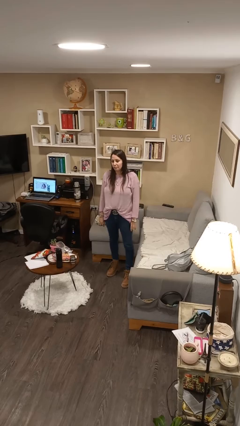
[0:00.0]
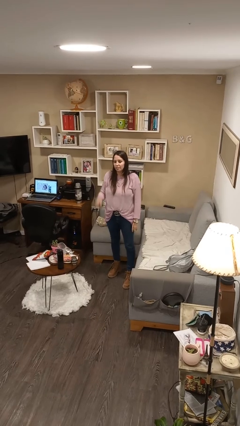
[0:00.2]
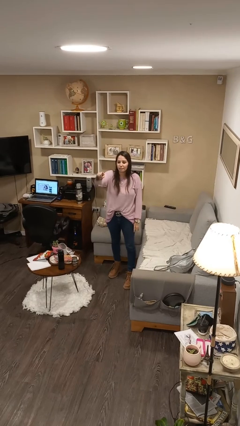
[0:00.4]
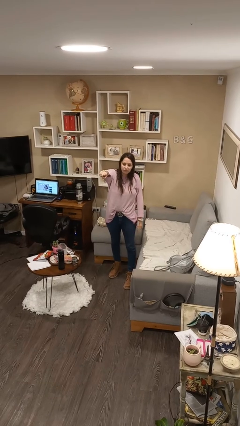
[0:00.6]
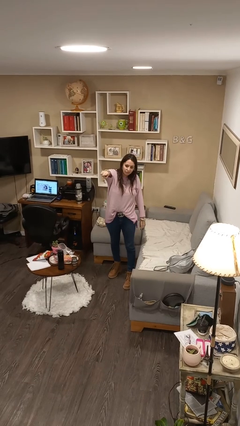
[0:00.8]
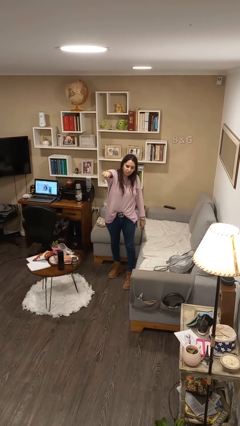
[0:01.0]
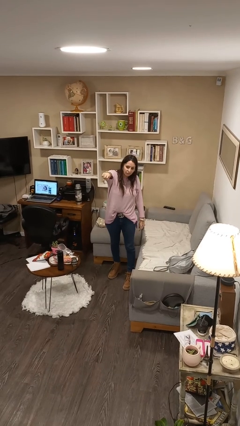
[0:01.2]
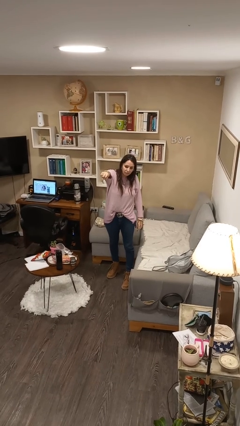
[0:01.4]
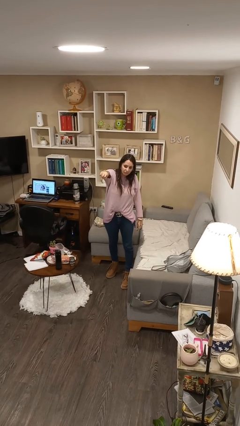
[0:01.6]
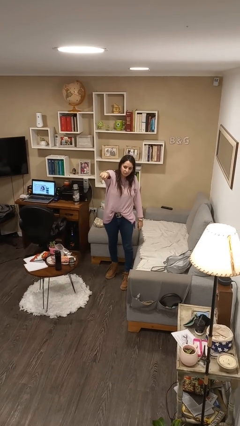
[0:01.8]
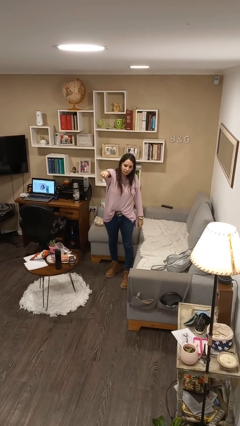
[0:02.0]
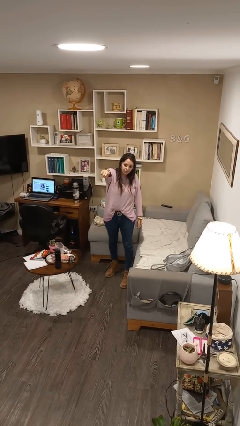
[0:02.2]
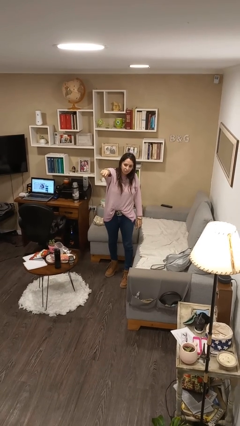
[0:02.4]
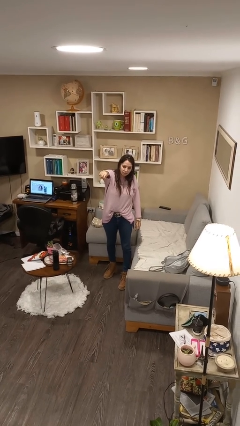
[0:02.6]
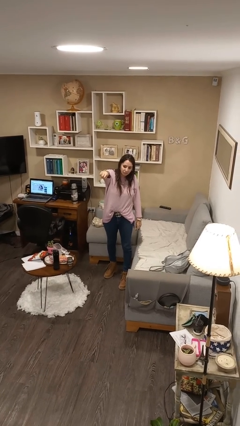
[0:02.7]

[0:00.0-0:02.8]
person points at person

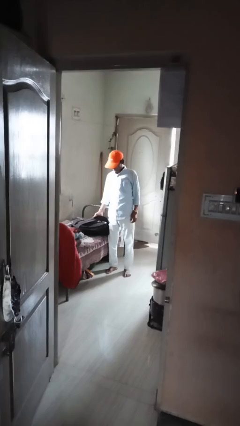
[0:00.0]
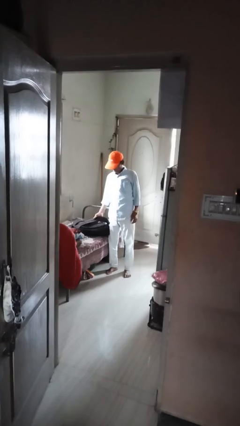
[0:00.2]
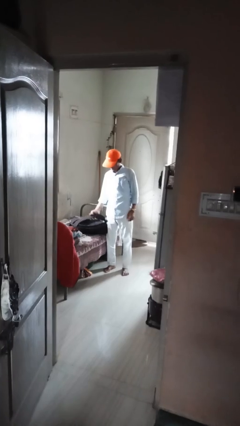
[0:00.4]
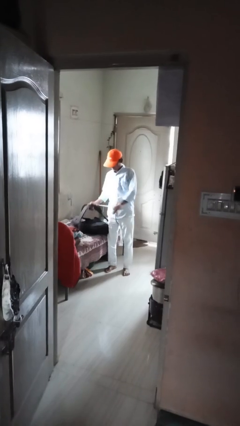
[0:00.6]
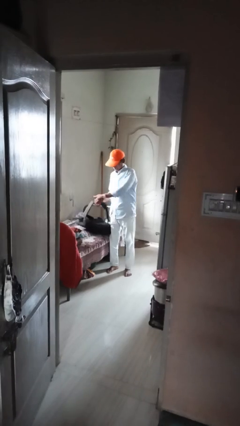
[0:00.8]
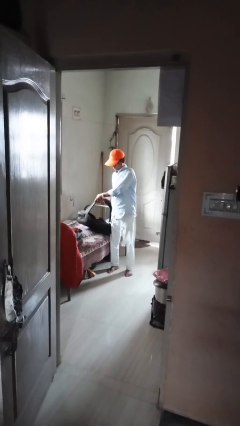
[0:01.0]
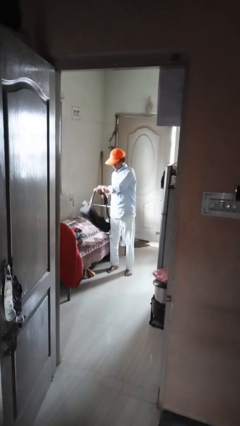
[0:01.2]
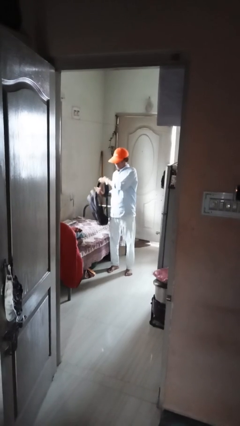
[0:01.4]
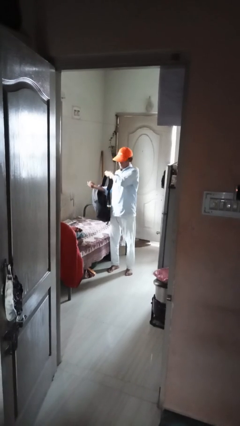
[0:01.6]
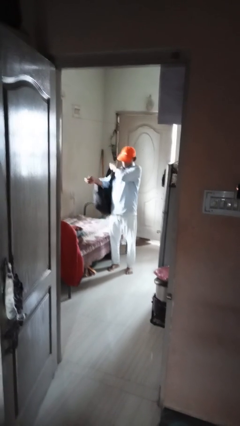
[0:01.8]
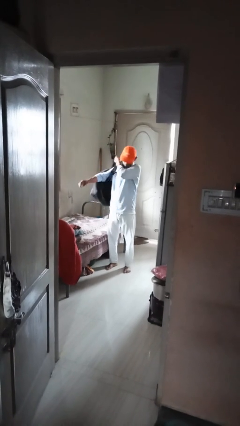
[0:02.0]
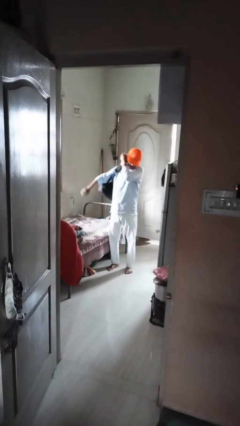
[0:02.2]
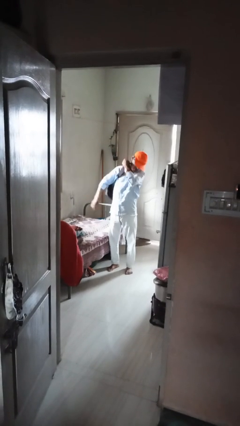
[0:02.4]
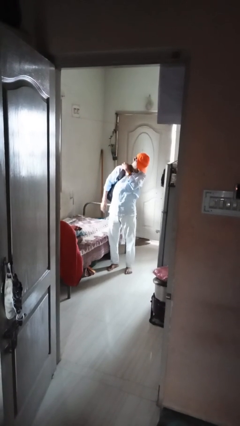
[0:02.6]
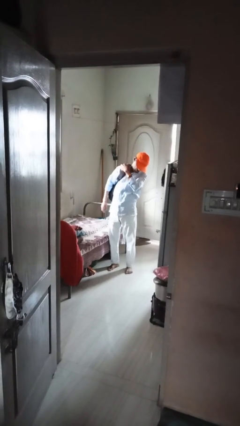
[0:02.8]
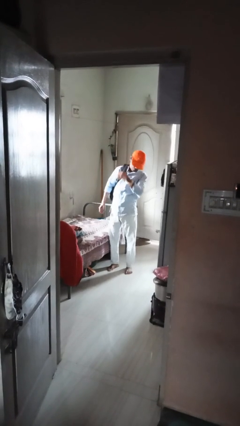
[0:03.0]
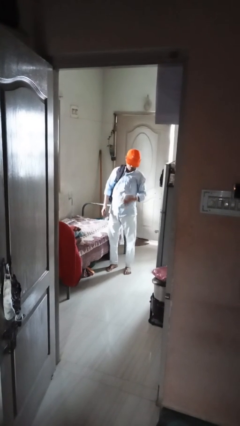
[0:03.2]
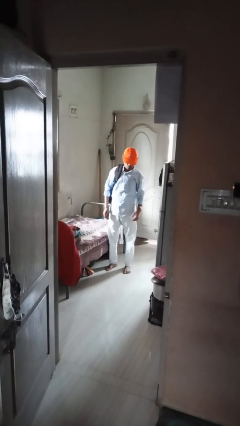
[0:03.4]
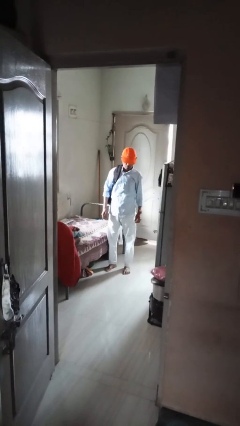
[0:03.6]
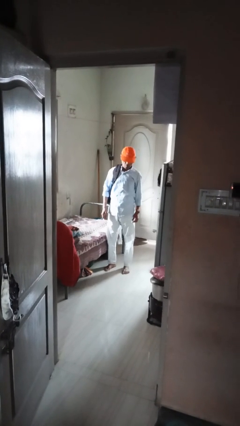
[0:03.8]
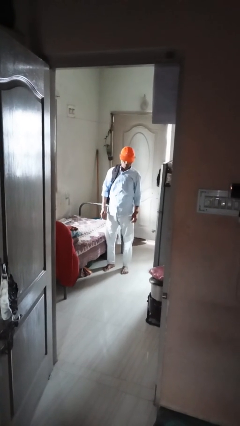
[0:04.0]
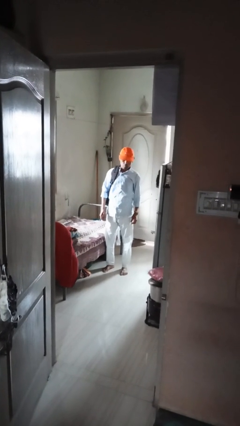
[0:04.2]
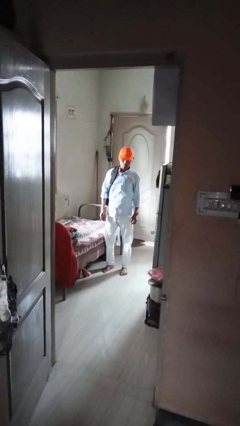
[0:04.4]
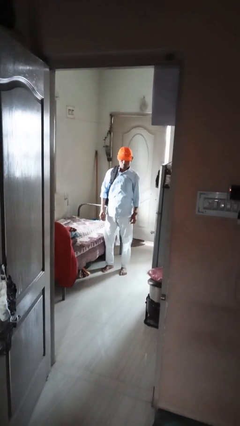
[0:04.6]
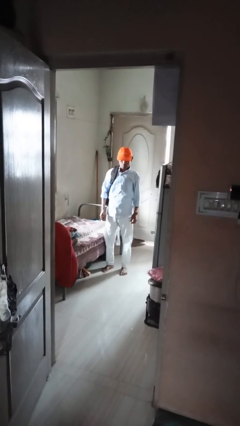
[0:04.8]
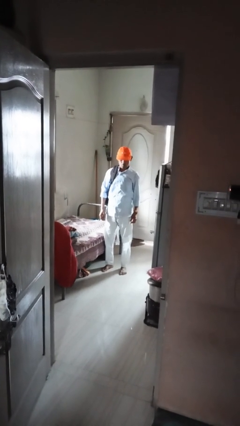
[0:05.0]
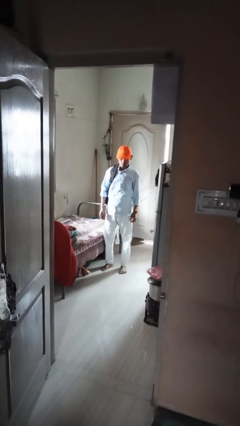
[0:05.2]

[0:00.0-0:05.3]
person puts on backpack

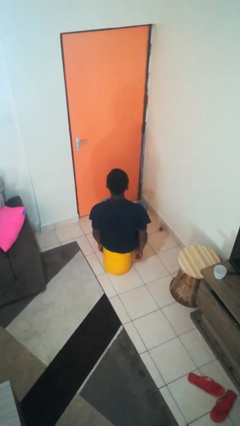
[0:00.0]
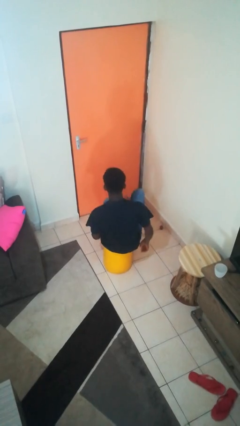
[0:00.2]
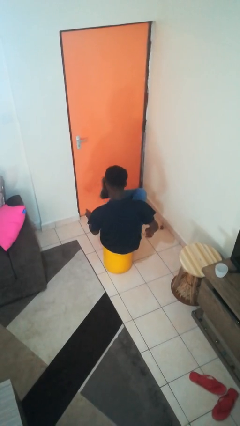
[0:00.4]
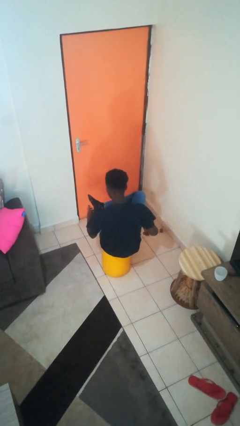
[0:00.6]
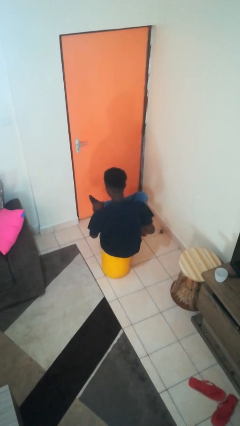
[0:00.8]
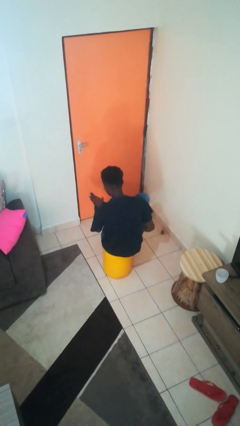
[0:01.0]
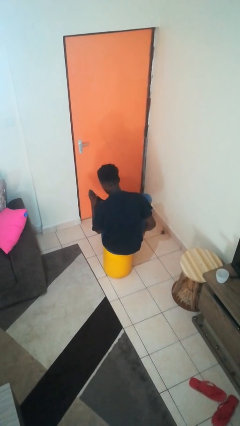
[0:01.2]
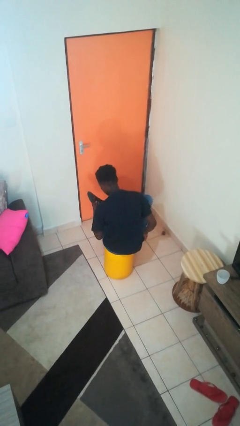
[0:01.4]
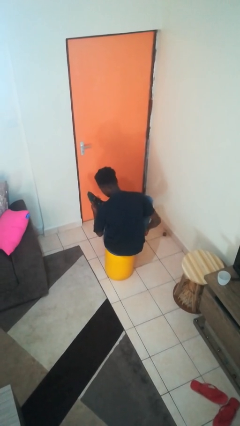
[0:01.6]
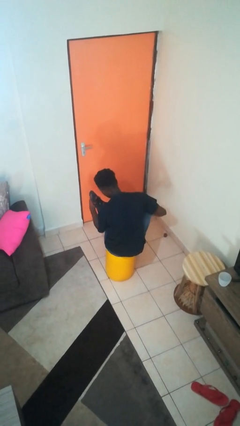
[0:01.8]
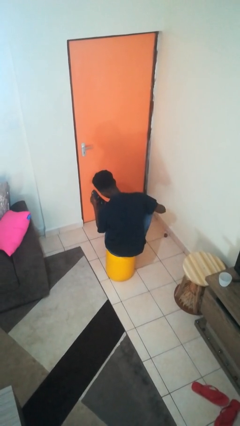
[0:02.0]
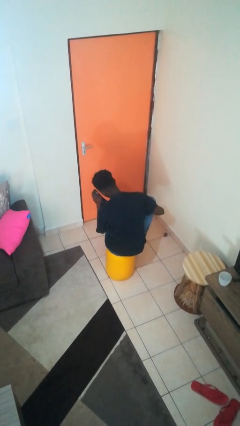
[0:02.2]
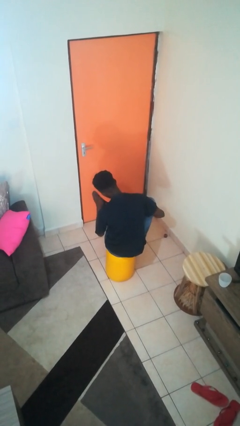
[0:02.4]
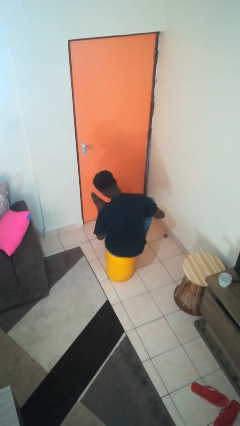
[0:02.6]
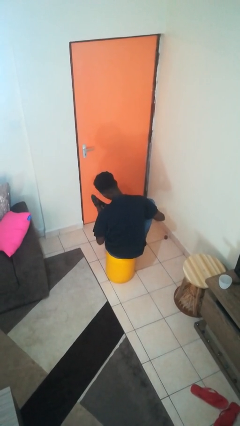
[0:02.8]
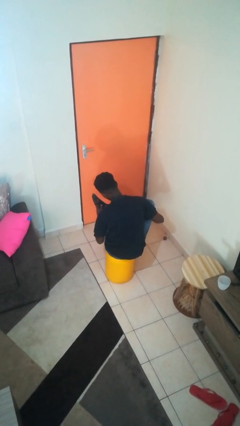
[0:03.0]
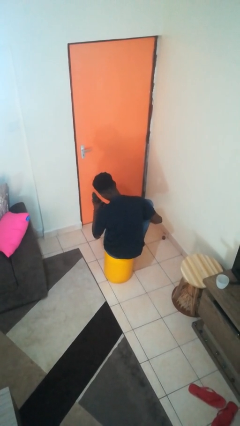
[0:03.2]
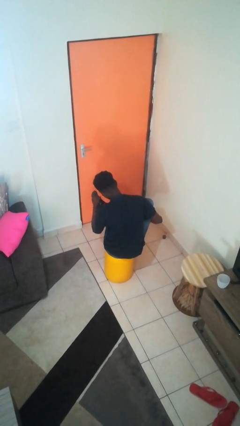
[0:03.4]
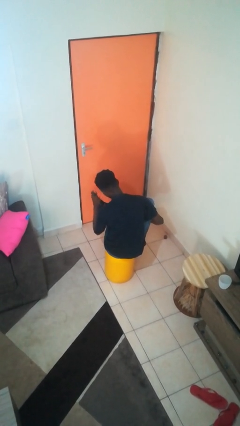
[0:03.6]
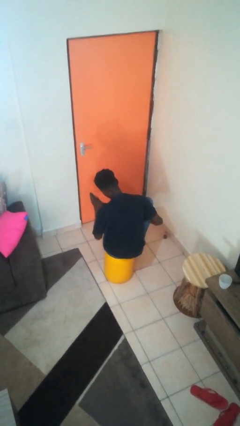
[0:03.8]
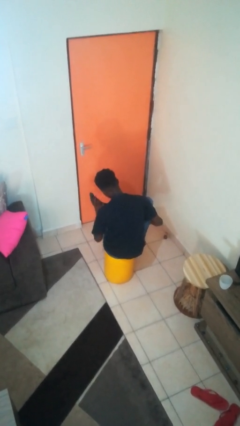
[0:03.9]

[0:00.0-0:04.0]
person rubs foot

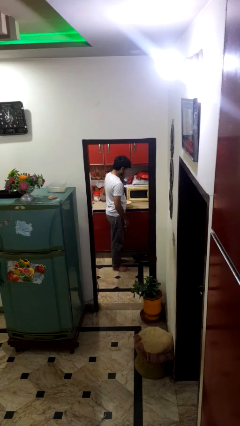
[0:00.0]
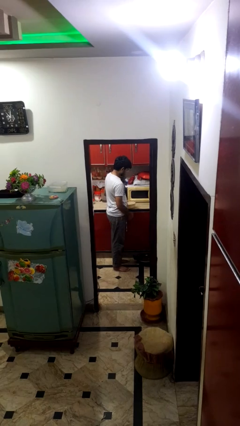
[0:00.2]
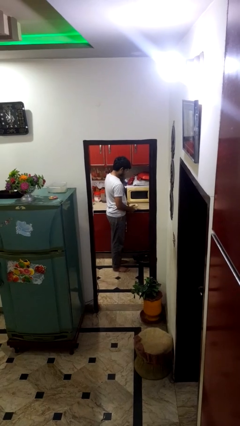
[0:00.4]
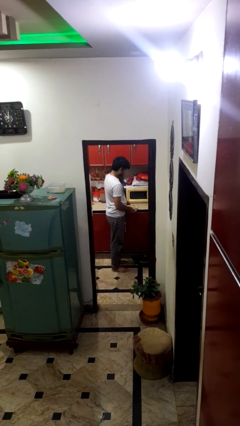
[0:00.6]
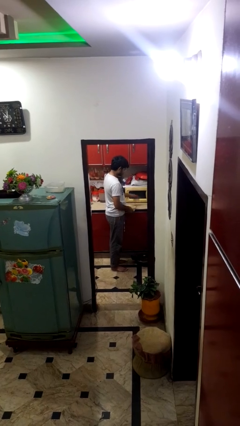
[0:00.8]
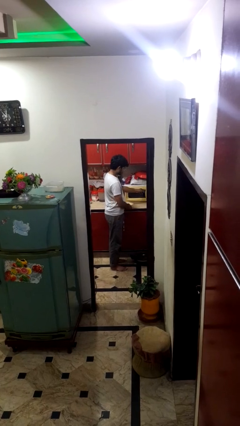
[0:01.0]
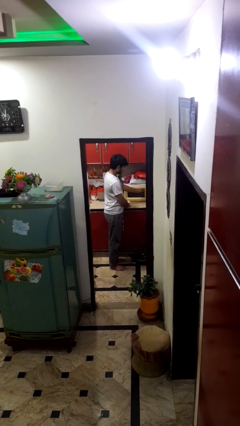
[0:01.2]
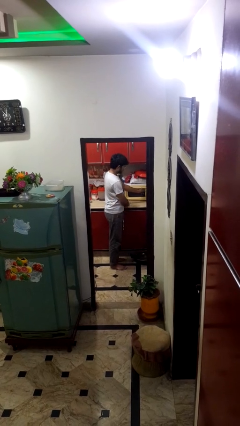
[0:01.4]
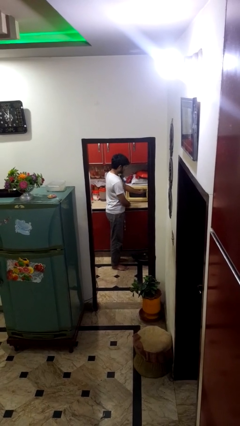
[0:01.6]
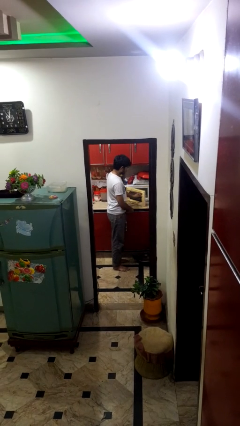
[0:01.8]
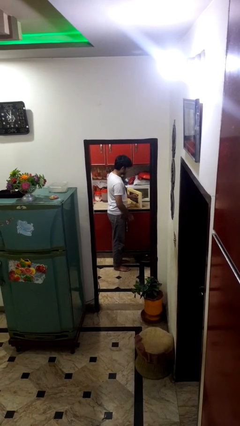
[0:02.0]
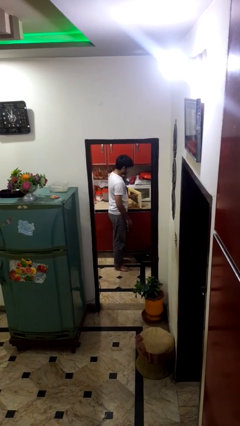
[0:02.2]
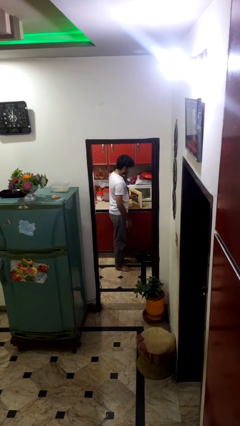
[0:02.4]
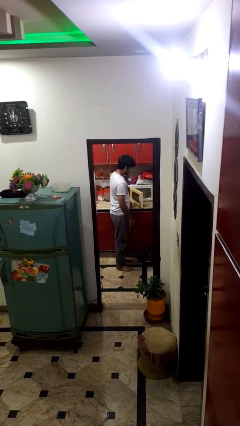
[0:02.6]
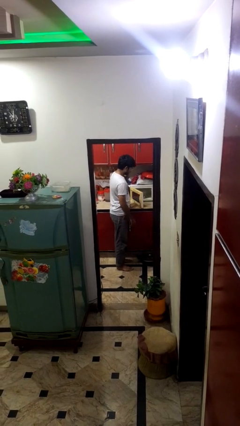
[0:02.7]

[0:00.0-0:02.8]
person opens microwave

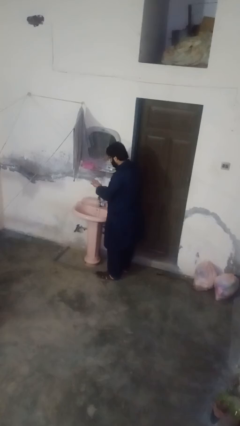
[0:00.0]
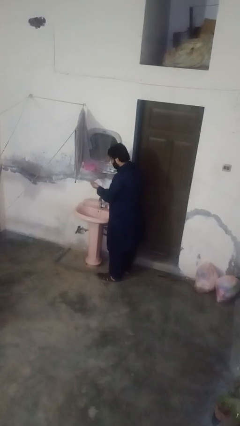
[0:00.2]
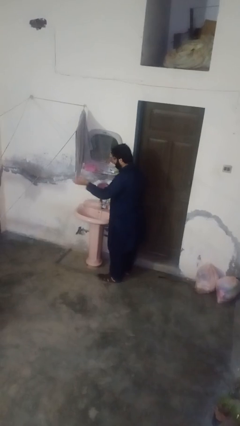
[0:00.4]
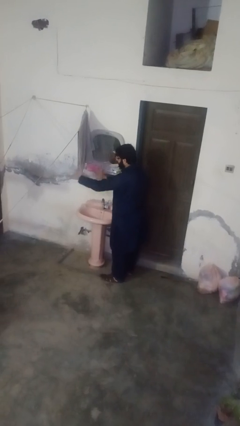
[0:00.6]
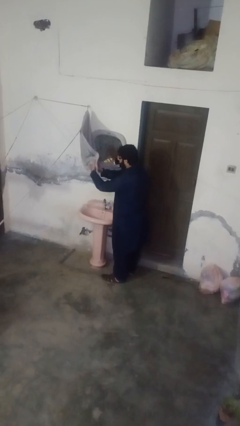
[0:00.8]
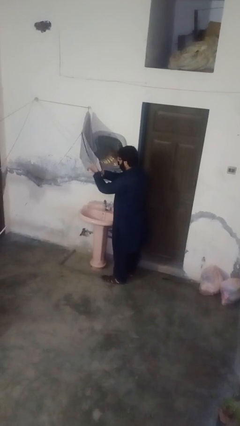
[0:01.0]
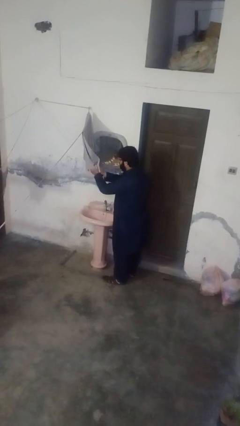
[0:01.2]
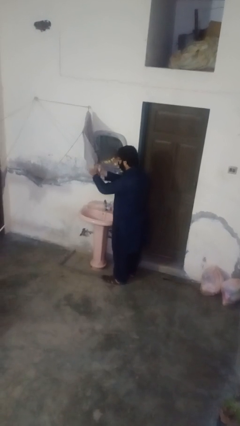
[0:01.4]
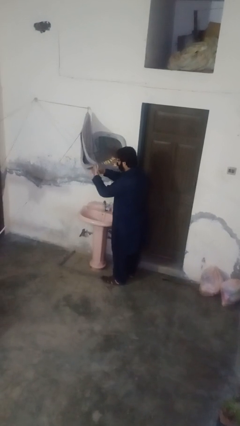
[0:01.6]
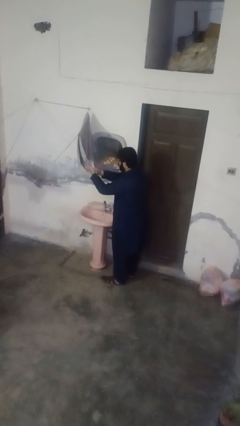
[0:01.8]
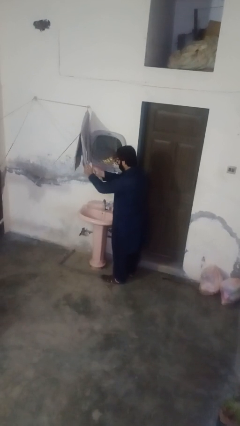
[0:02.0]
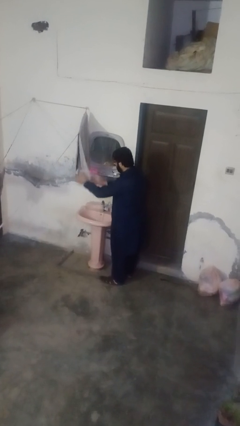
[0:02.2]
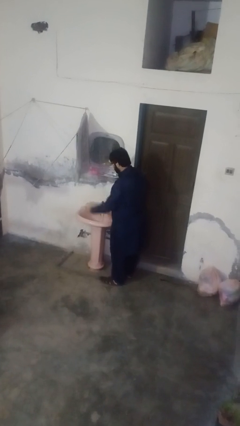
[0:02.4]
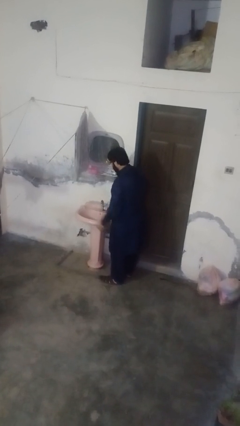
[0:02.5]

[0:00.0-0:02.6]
person dries hands with towel
